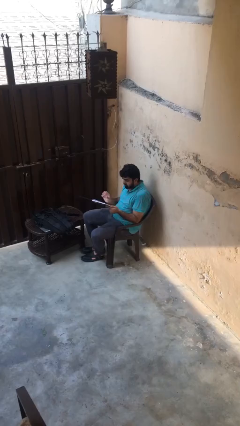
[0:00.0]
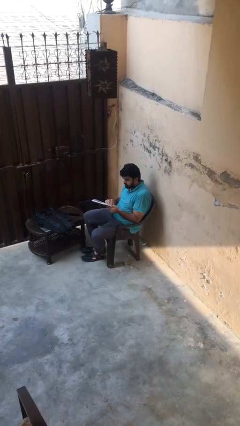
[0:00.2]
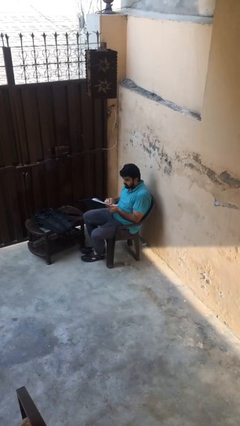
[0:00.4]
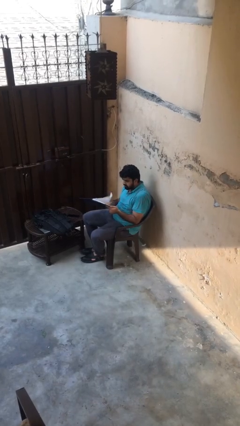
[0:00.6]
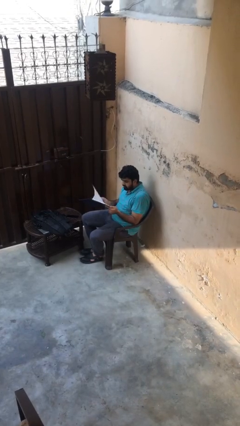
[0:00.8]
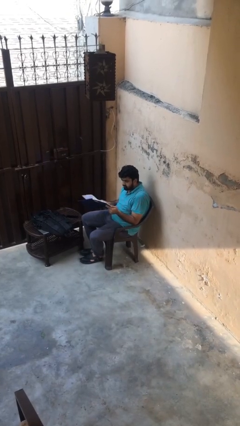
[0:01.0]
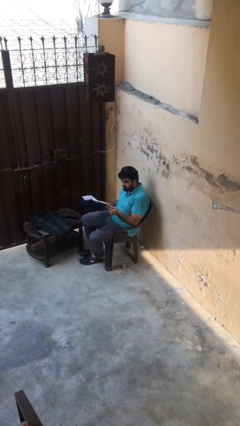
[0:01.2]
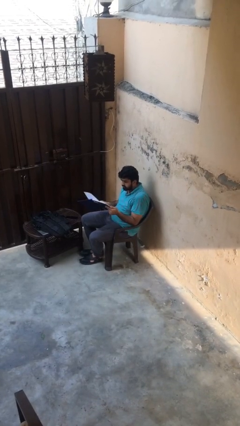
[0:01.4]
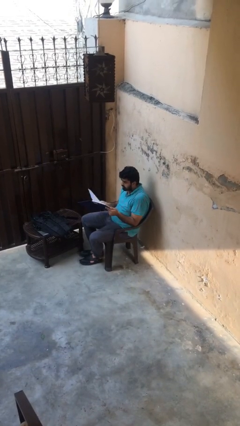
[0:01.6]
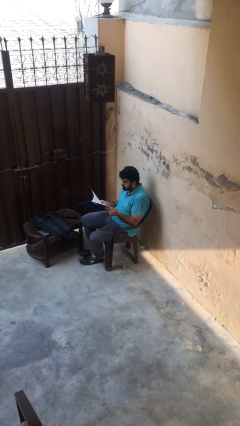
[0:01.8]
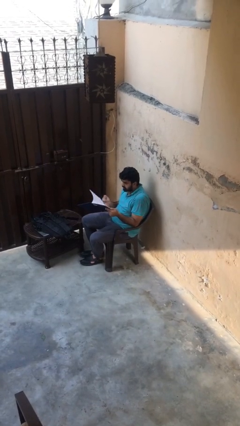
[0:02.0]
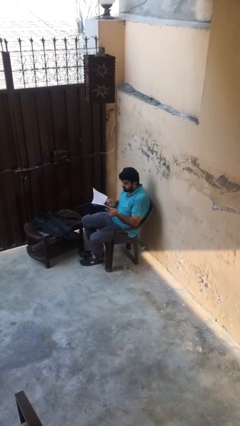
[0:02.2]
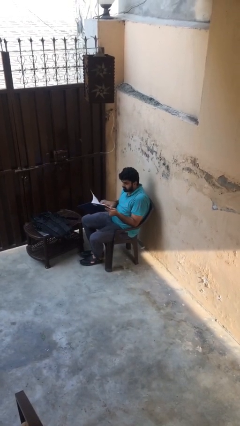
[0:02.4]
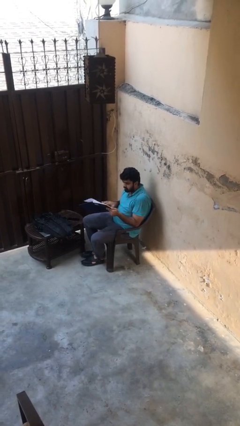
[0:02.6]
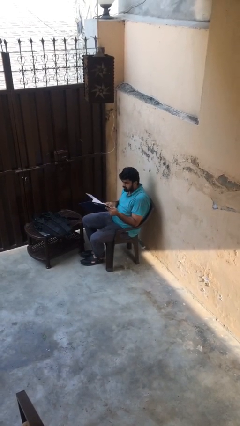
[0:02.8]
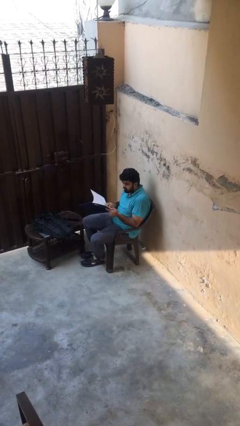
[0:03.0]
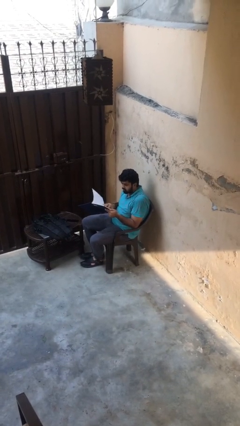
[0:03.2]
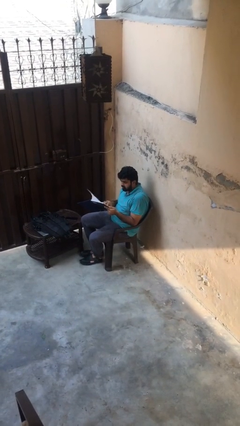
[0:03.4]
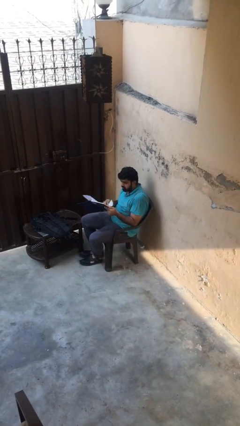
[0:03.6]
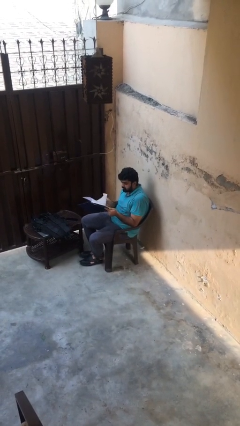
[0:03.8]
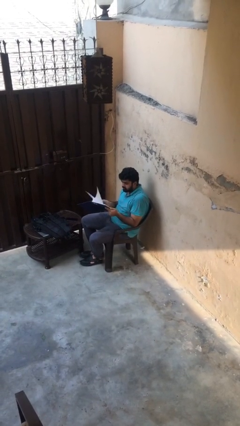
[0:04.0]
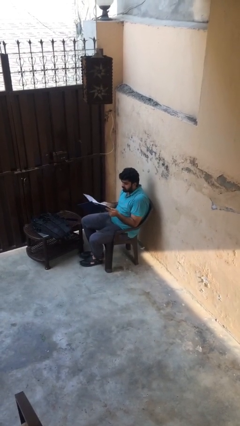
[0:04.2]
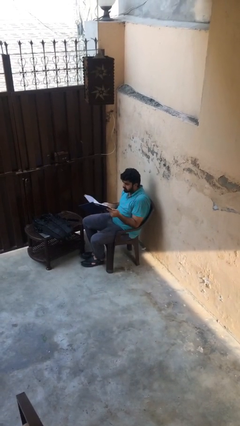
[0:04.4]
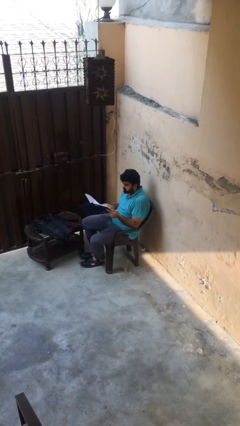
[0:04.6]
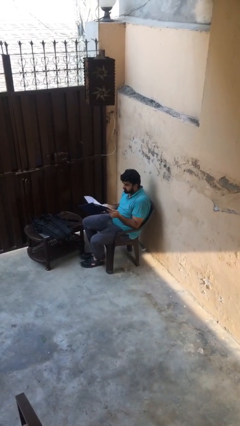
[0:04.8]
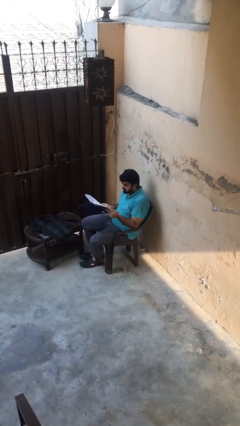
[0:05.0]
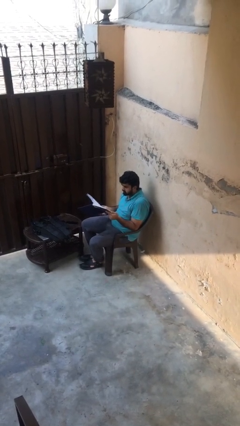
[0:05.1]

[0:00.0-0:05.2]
person reads document

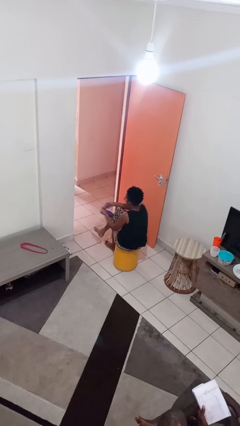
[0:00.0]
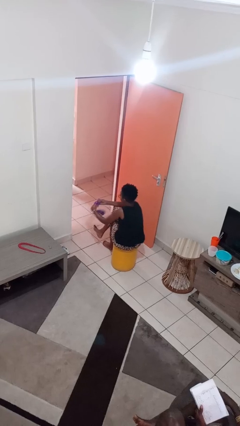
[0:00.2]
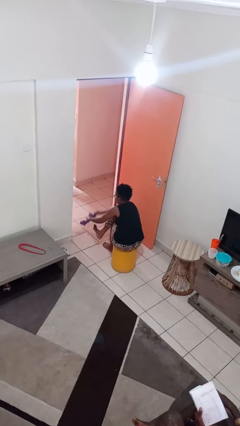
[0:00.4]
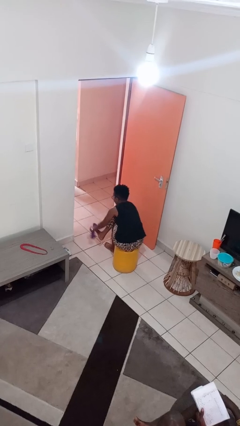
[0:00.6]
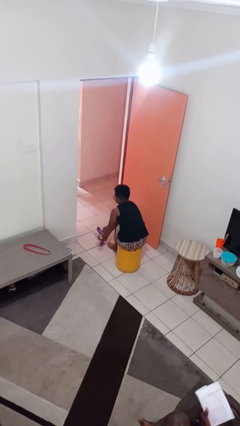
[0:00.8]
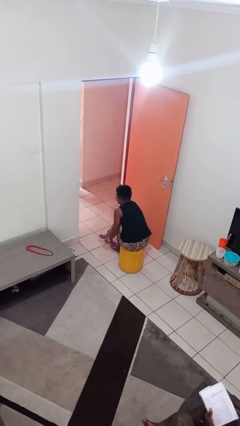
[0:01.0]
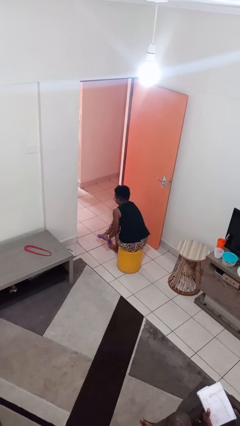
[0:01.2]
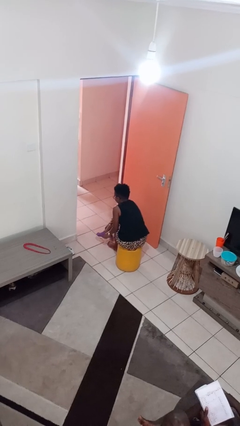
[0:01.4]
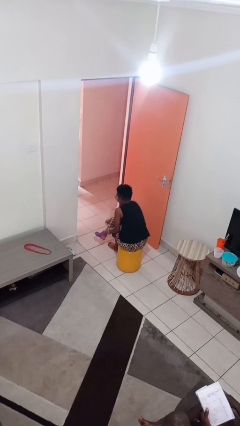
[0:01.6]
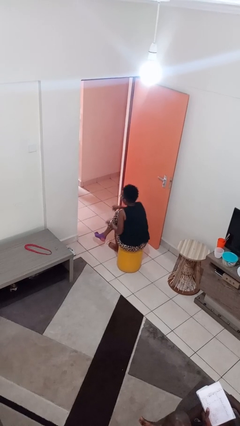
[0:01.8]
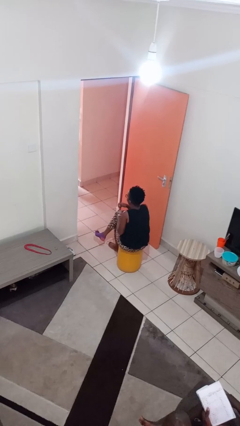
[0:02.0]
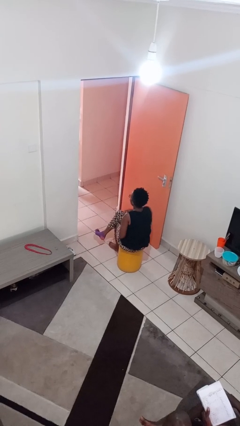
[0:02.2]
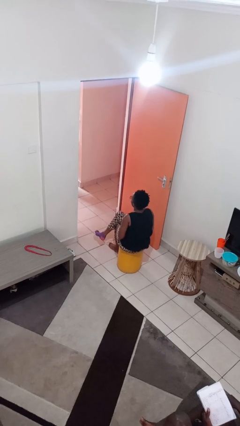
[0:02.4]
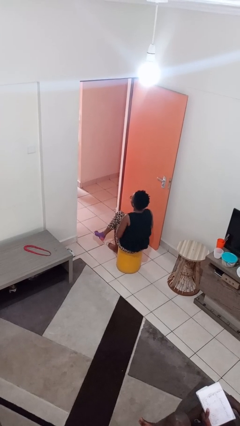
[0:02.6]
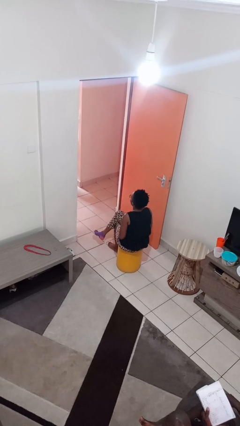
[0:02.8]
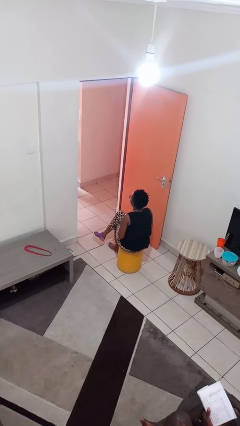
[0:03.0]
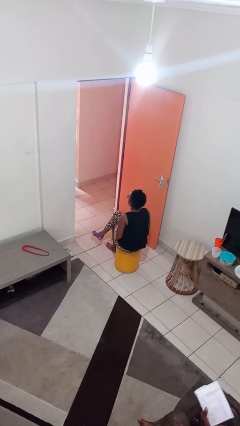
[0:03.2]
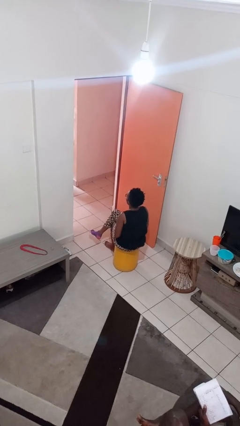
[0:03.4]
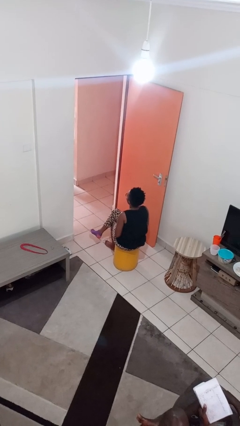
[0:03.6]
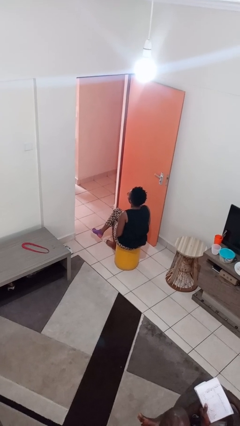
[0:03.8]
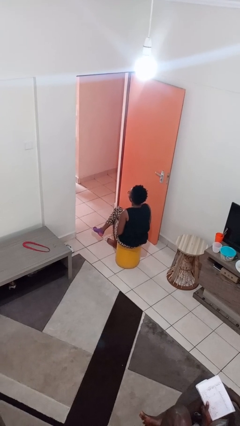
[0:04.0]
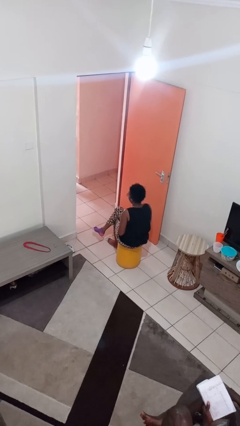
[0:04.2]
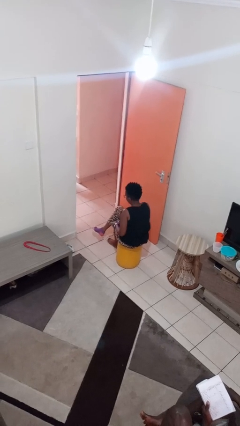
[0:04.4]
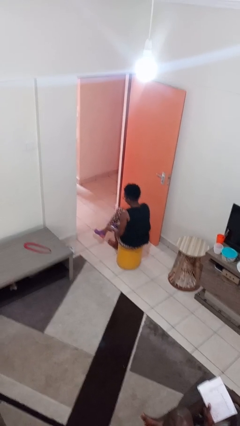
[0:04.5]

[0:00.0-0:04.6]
person puts on socks

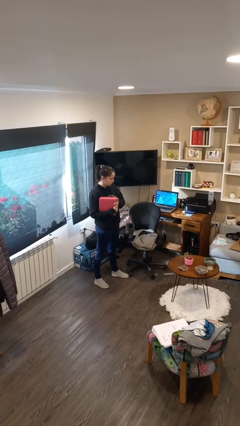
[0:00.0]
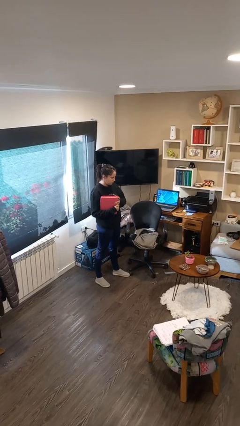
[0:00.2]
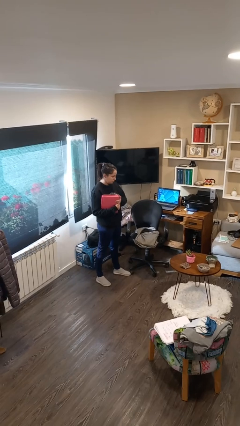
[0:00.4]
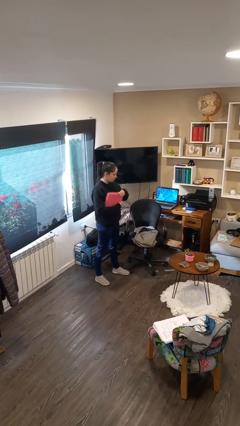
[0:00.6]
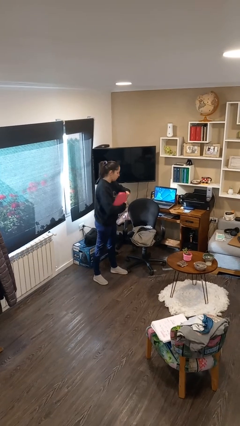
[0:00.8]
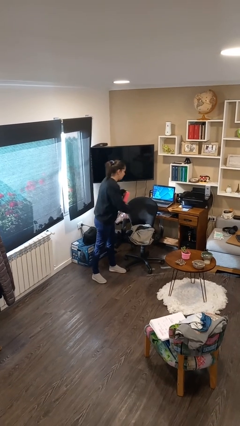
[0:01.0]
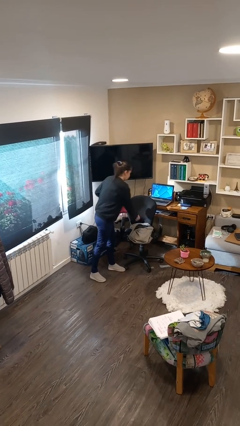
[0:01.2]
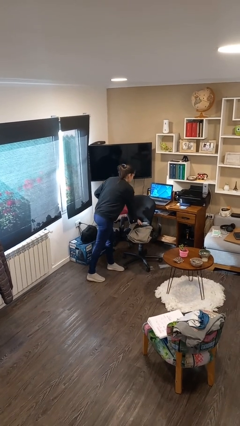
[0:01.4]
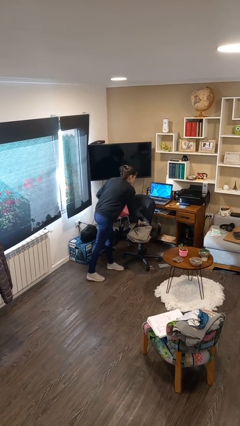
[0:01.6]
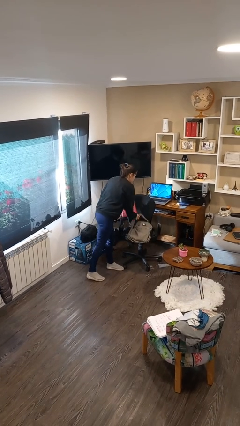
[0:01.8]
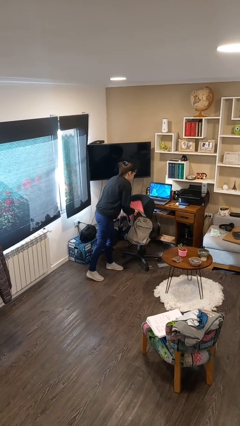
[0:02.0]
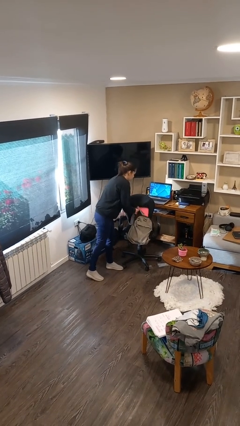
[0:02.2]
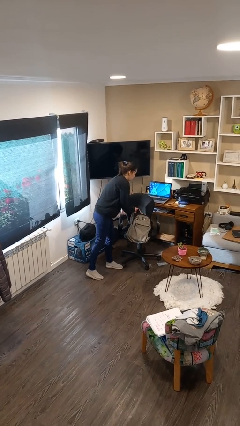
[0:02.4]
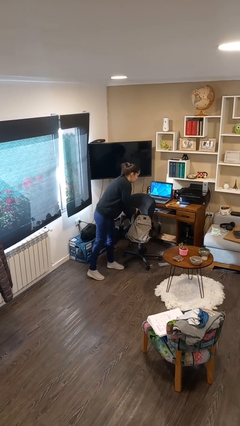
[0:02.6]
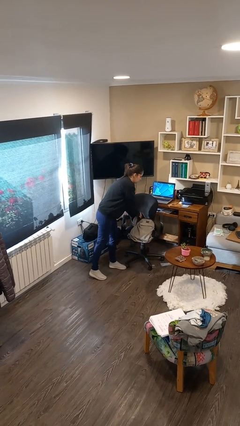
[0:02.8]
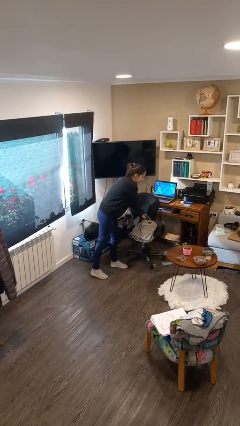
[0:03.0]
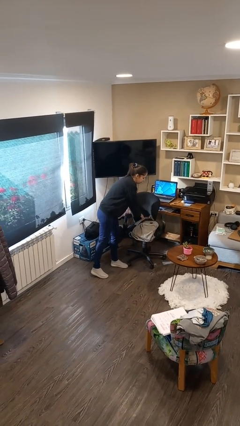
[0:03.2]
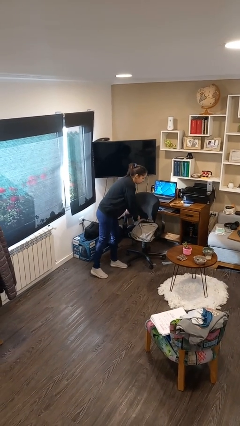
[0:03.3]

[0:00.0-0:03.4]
person puts object into backpack

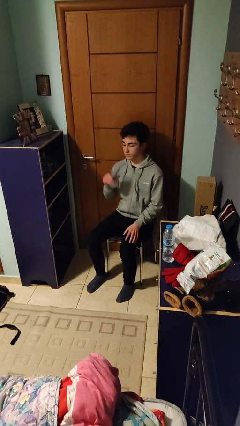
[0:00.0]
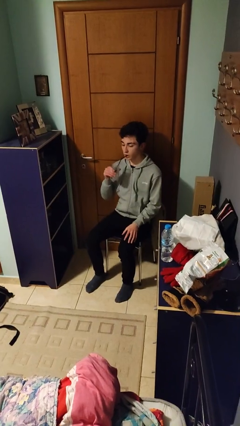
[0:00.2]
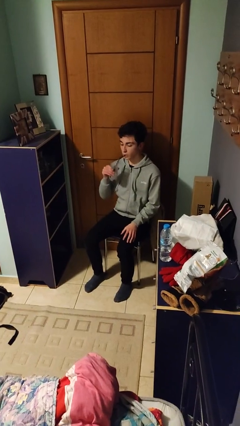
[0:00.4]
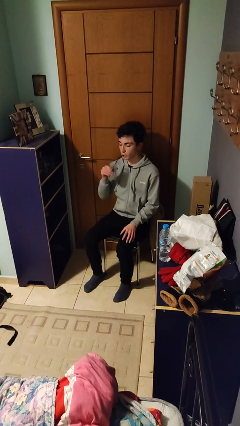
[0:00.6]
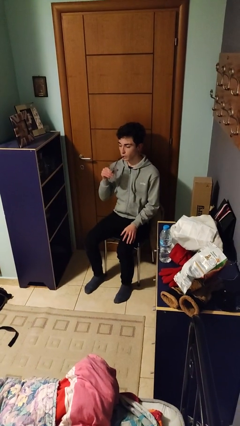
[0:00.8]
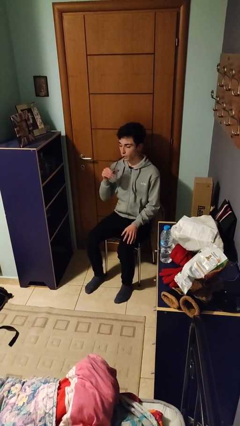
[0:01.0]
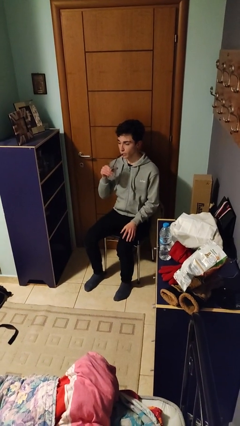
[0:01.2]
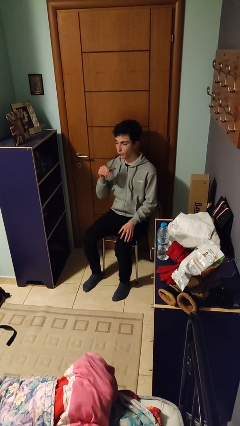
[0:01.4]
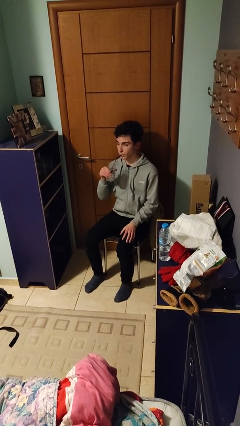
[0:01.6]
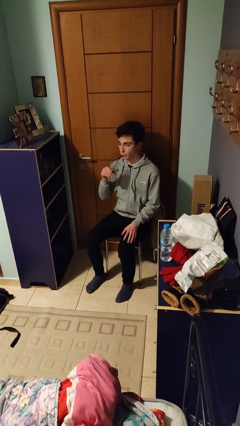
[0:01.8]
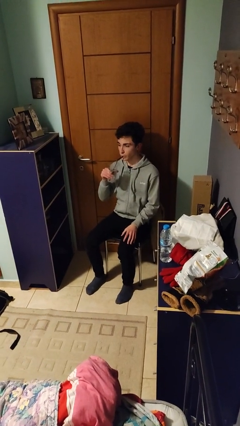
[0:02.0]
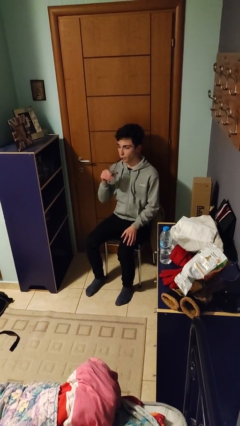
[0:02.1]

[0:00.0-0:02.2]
person drinks from straw

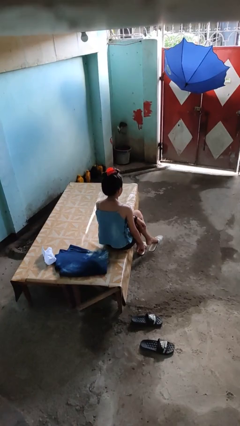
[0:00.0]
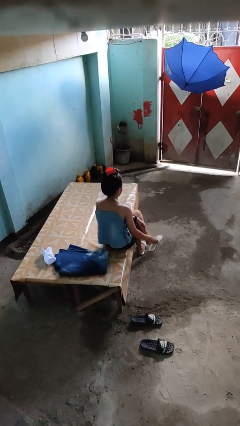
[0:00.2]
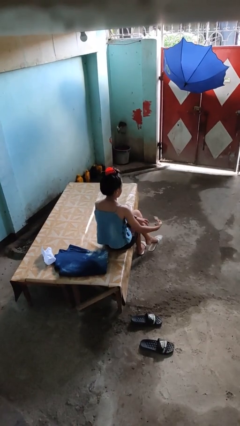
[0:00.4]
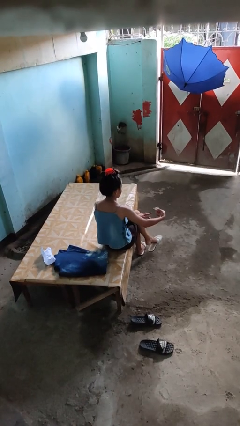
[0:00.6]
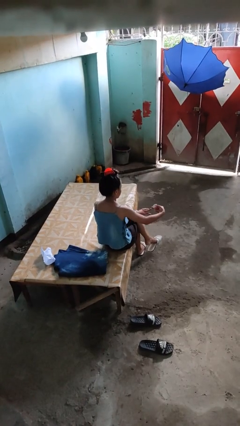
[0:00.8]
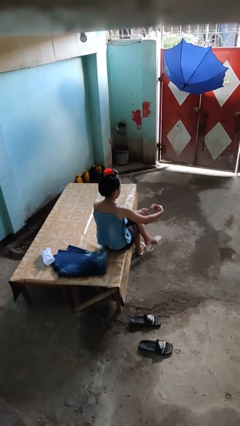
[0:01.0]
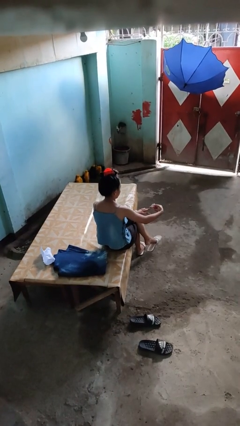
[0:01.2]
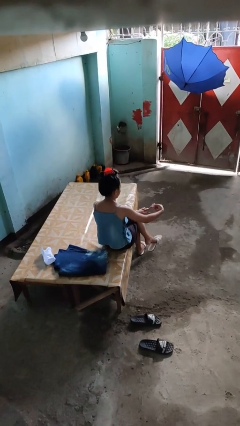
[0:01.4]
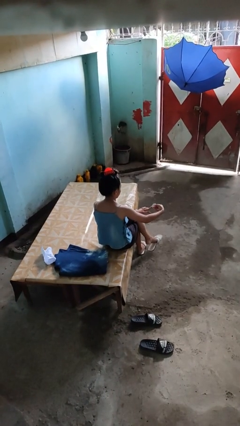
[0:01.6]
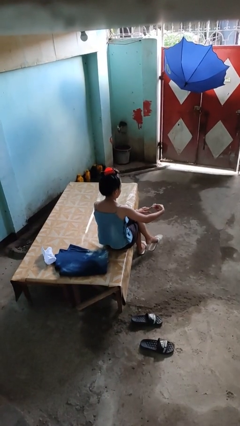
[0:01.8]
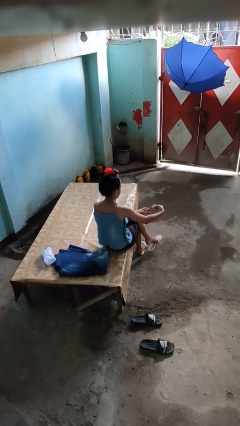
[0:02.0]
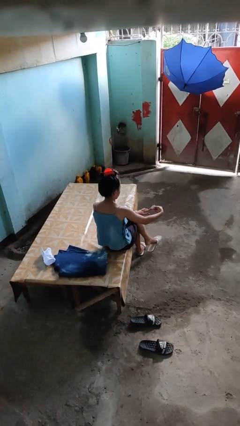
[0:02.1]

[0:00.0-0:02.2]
person clips fingernails

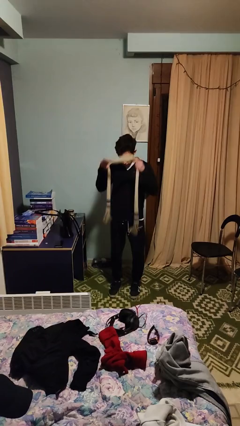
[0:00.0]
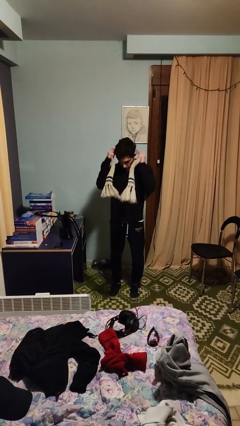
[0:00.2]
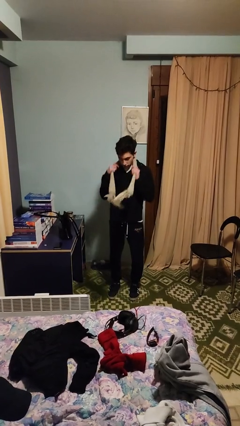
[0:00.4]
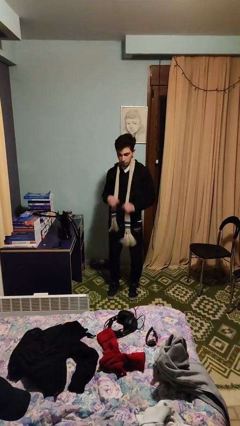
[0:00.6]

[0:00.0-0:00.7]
person puts on scarf
